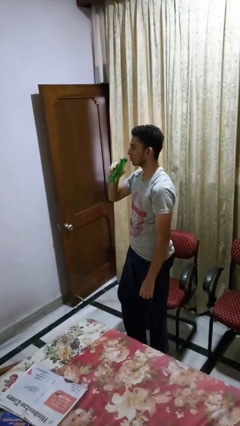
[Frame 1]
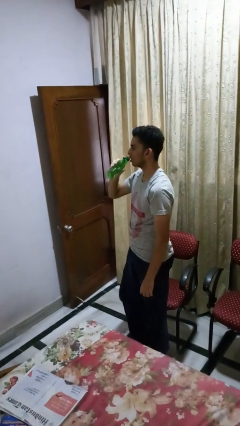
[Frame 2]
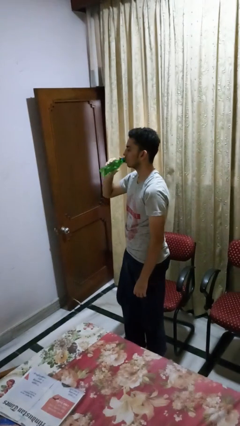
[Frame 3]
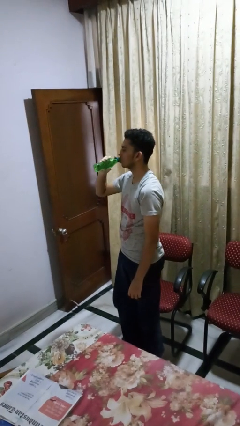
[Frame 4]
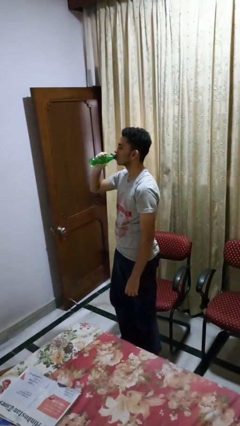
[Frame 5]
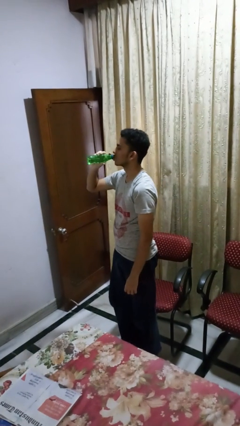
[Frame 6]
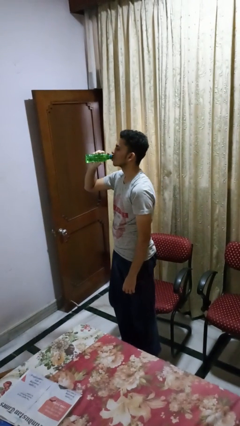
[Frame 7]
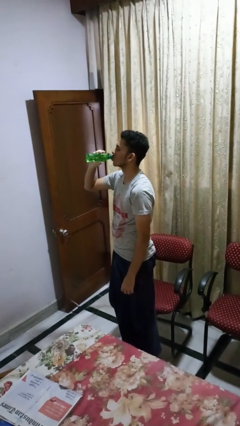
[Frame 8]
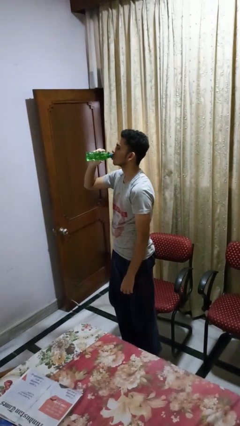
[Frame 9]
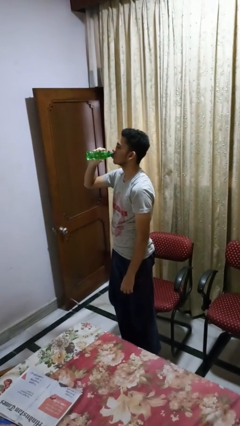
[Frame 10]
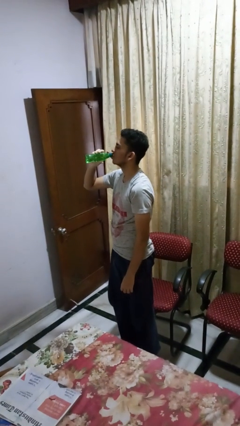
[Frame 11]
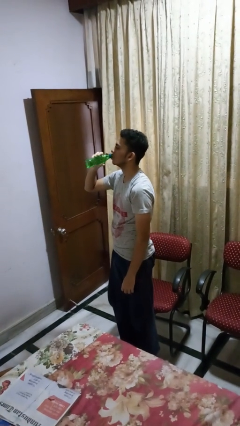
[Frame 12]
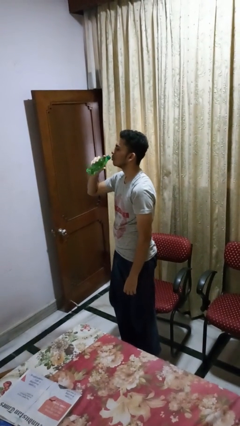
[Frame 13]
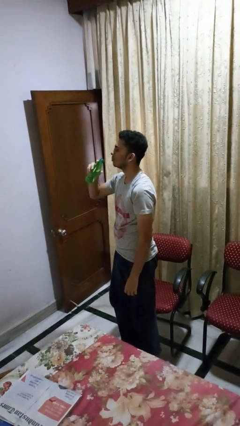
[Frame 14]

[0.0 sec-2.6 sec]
person drinks from bottle

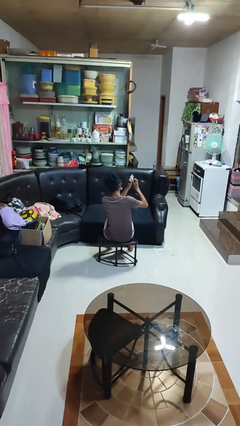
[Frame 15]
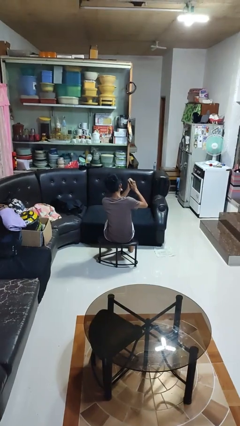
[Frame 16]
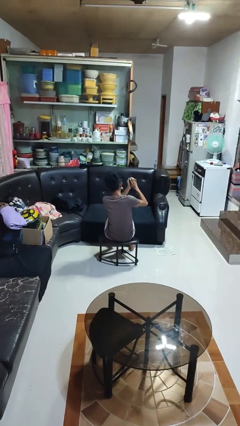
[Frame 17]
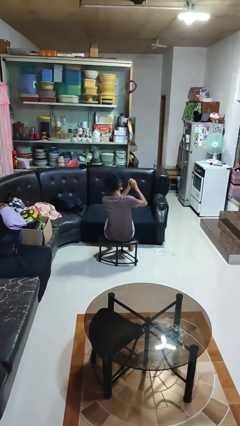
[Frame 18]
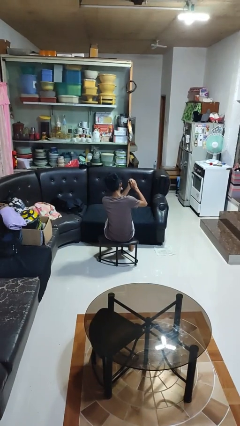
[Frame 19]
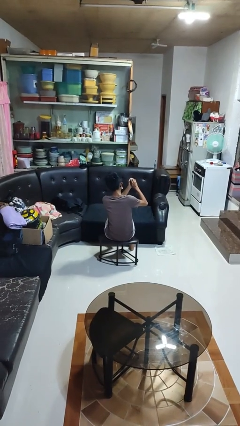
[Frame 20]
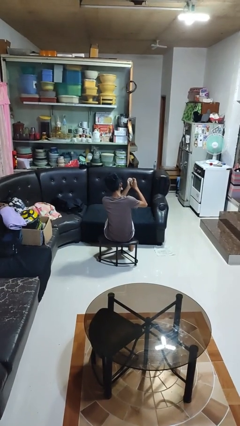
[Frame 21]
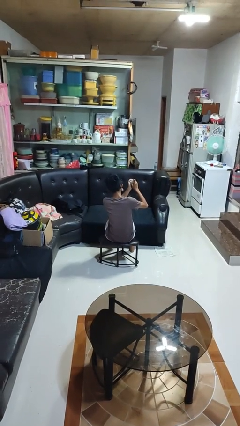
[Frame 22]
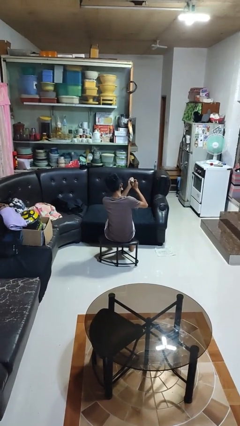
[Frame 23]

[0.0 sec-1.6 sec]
person crumples paper

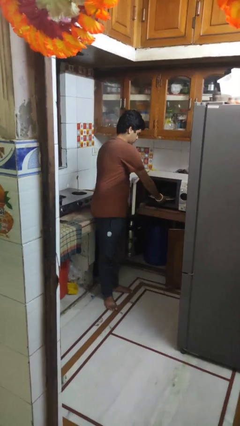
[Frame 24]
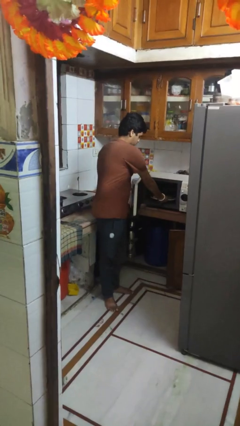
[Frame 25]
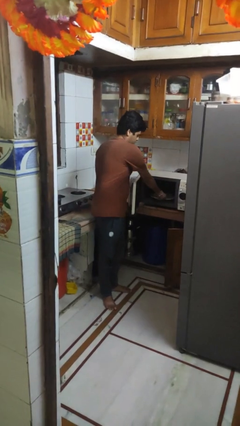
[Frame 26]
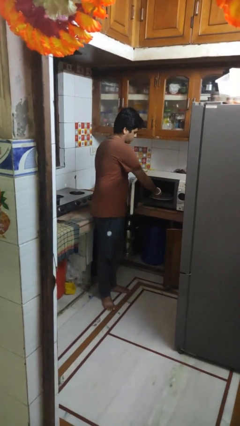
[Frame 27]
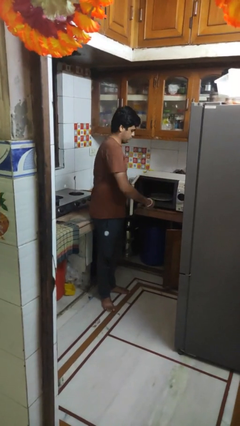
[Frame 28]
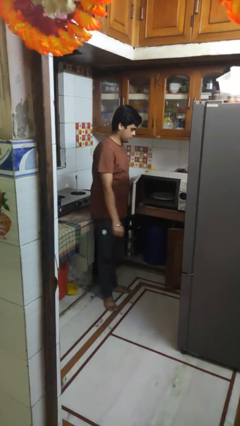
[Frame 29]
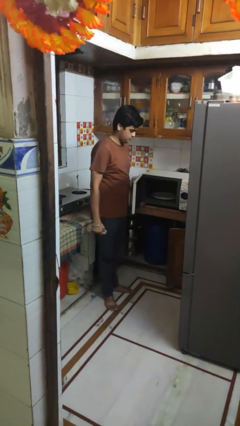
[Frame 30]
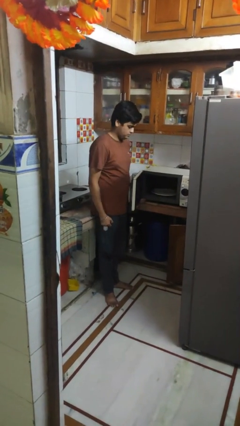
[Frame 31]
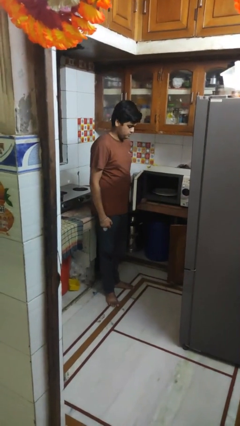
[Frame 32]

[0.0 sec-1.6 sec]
person puts object into microwave

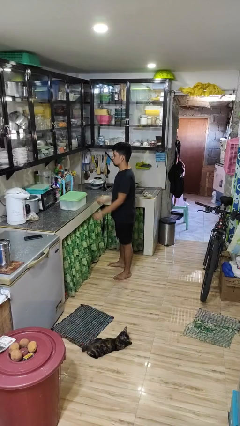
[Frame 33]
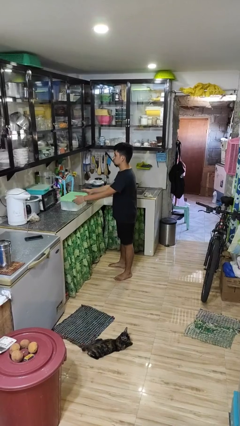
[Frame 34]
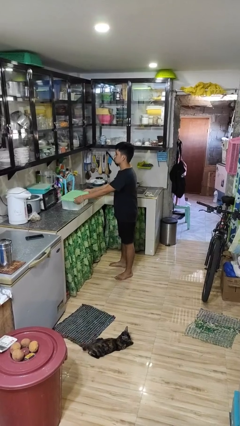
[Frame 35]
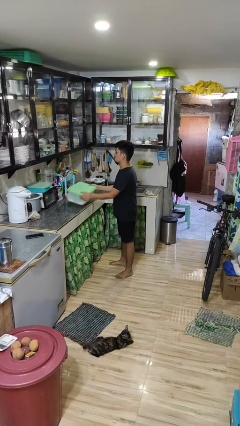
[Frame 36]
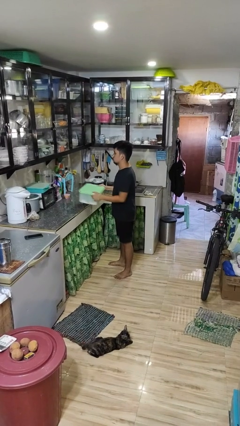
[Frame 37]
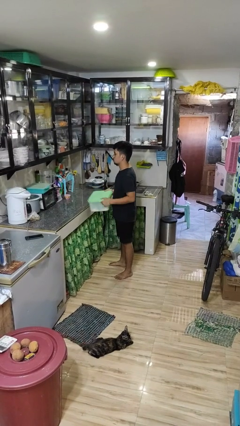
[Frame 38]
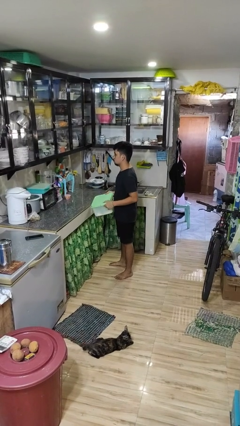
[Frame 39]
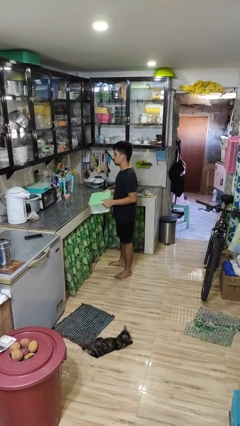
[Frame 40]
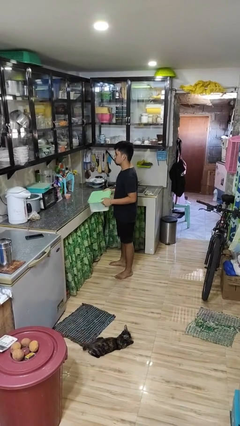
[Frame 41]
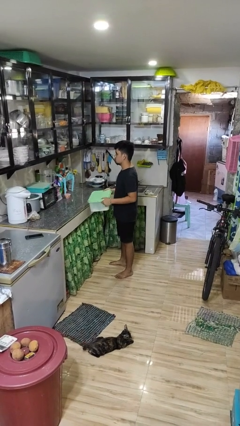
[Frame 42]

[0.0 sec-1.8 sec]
person picks up object from countertop

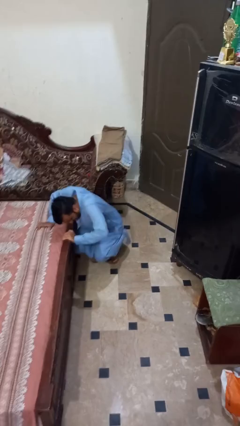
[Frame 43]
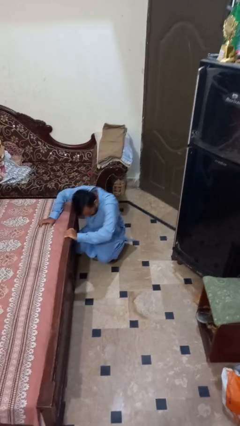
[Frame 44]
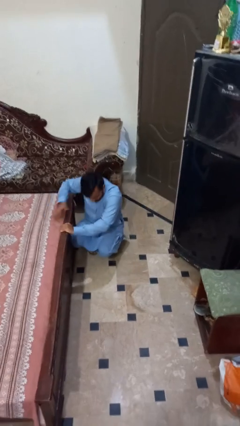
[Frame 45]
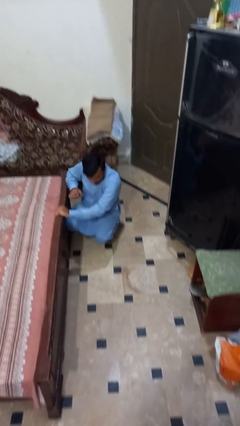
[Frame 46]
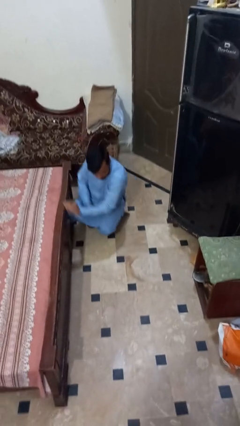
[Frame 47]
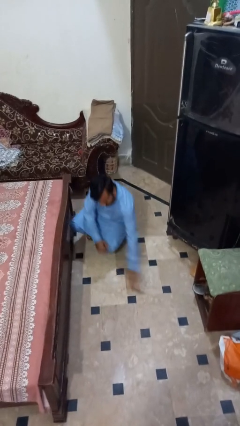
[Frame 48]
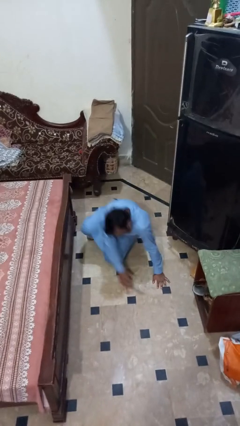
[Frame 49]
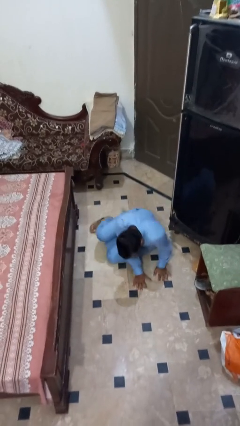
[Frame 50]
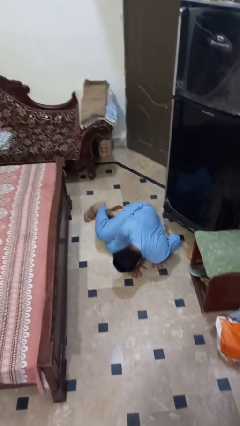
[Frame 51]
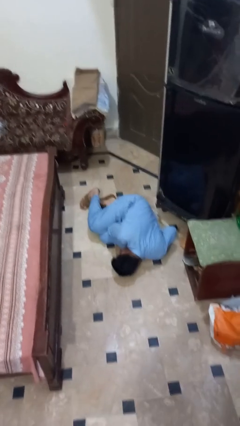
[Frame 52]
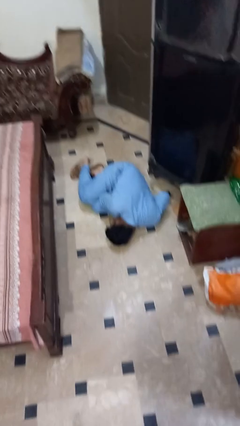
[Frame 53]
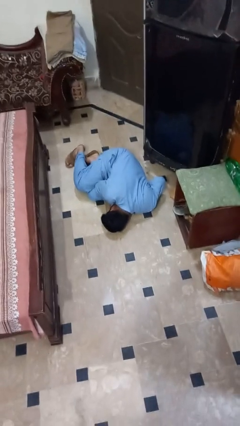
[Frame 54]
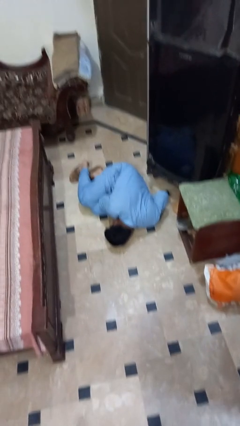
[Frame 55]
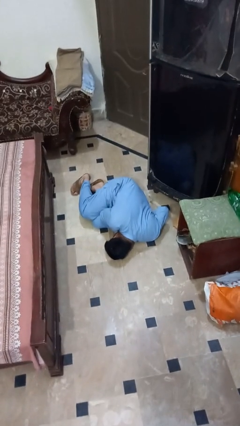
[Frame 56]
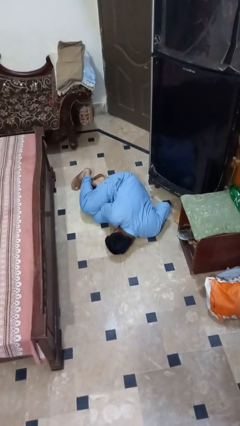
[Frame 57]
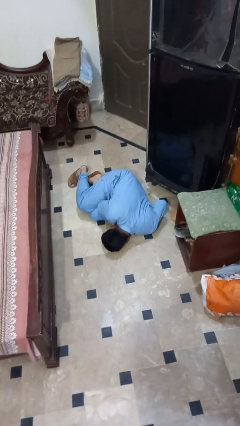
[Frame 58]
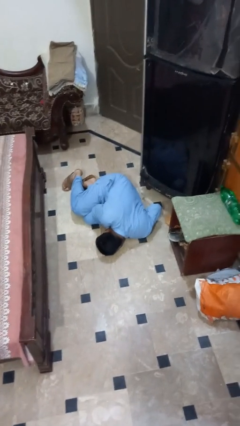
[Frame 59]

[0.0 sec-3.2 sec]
person lies down on floor

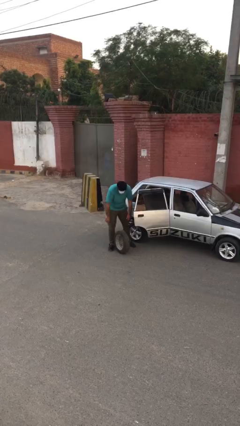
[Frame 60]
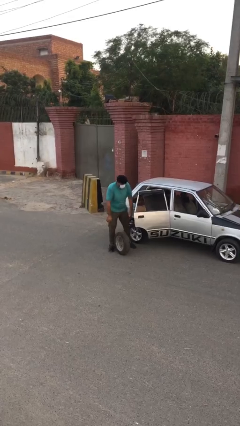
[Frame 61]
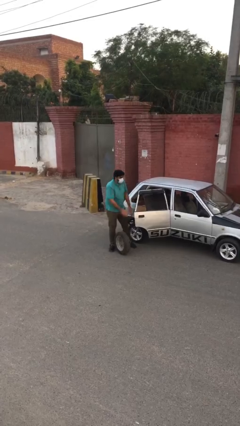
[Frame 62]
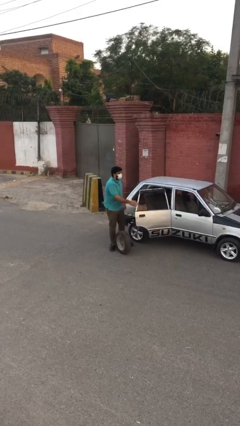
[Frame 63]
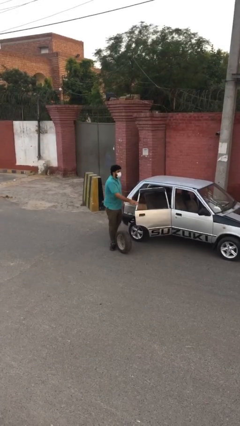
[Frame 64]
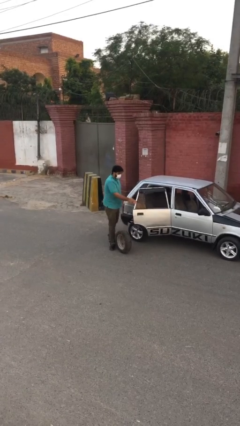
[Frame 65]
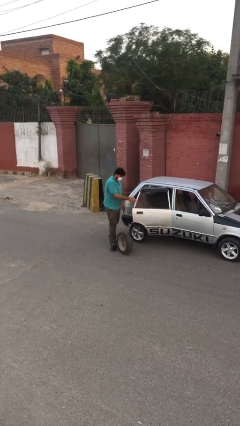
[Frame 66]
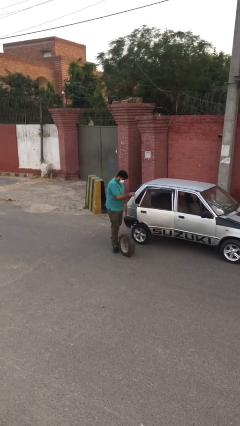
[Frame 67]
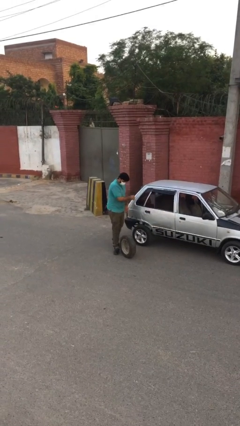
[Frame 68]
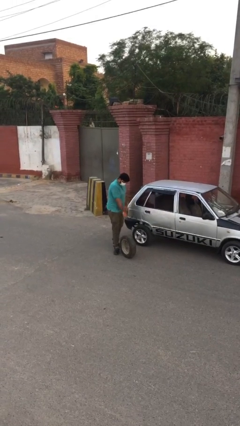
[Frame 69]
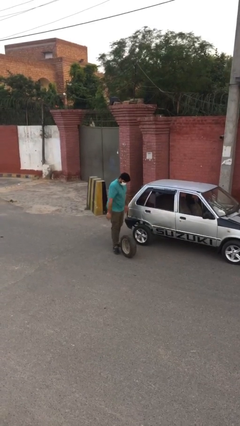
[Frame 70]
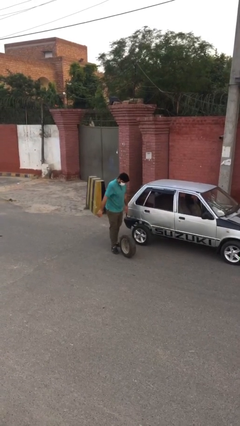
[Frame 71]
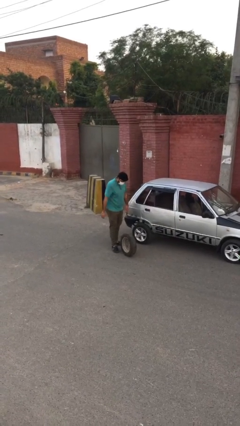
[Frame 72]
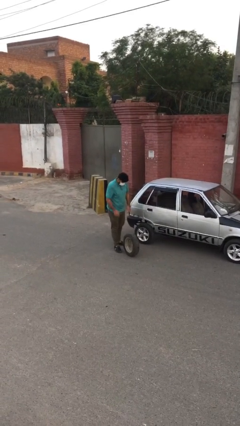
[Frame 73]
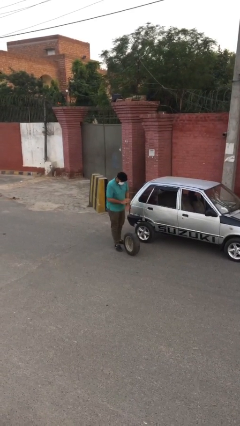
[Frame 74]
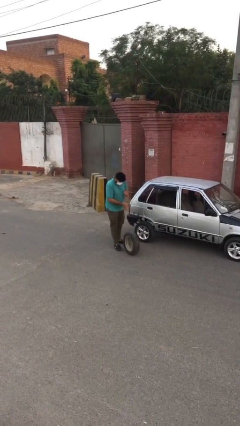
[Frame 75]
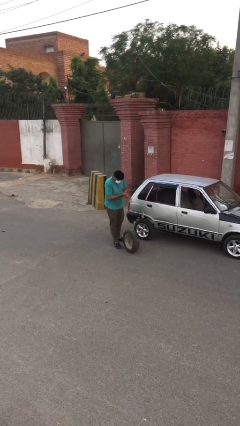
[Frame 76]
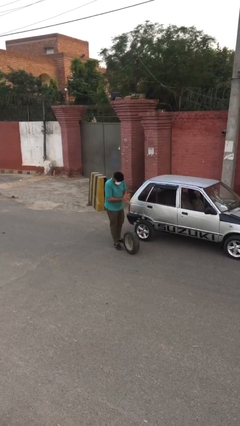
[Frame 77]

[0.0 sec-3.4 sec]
person closes car door

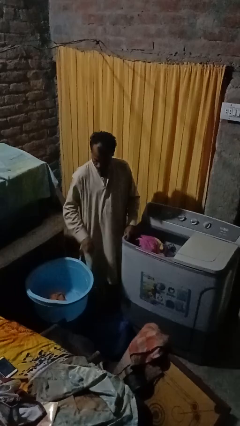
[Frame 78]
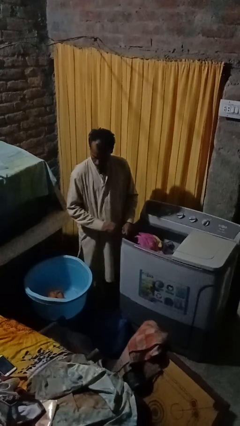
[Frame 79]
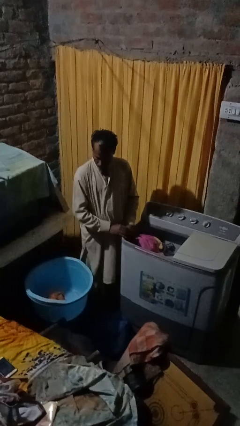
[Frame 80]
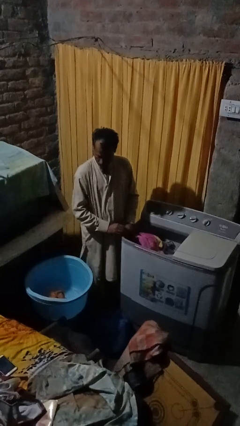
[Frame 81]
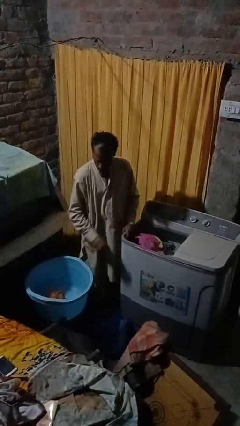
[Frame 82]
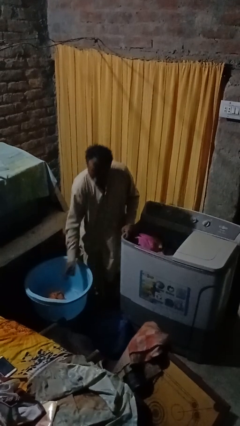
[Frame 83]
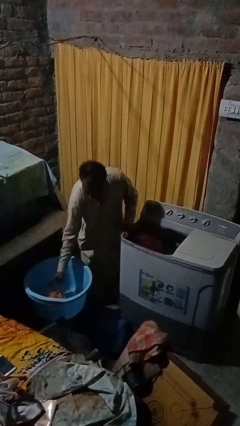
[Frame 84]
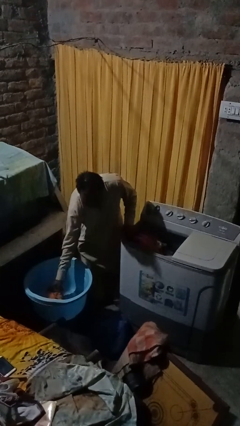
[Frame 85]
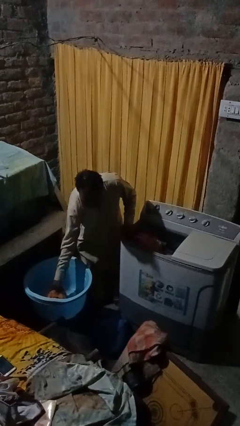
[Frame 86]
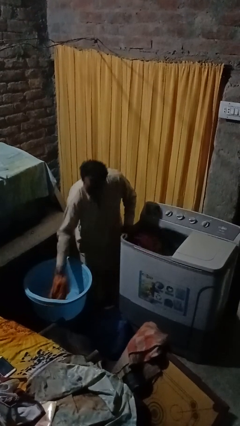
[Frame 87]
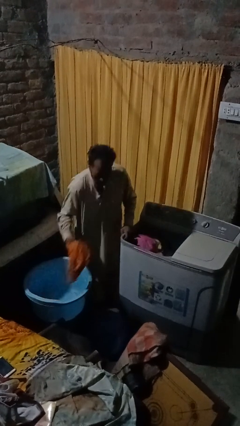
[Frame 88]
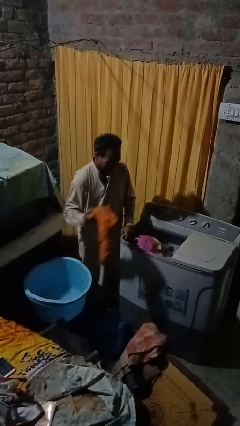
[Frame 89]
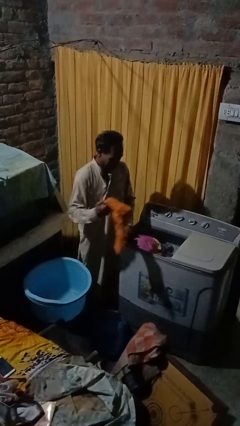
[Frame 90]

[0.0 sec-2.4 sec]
person loads clotheswasher

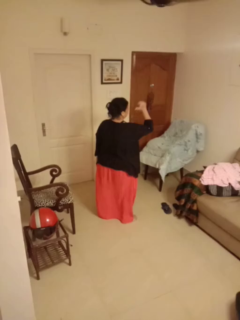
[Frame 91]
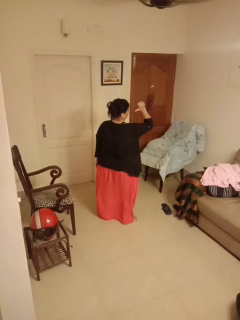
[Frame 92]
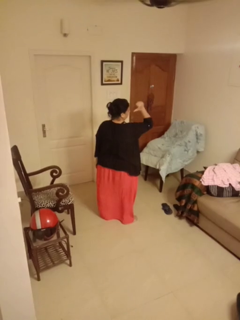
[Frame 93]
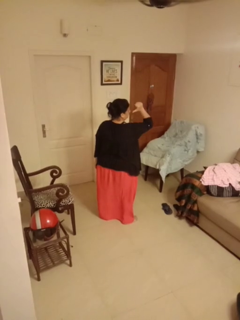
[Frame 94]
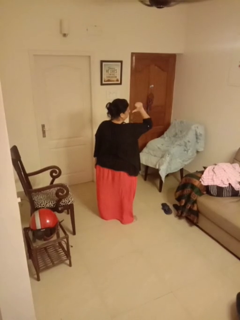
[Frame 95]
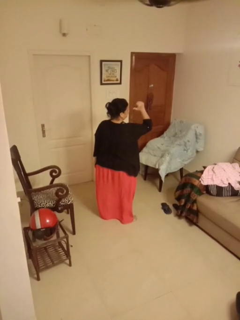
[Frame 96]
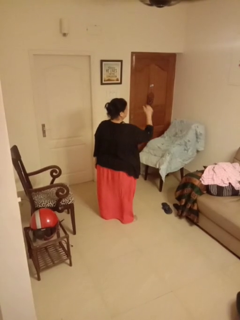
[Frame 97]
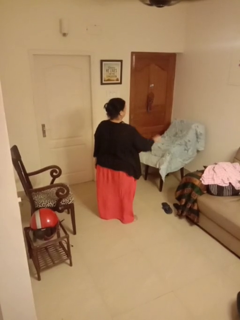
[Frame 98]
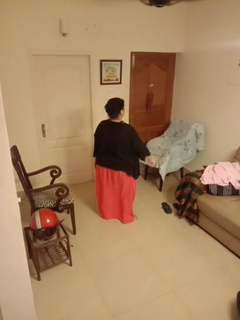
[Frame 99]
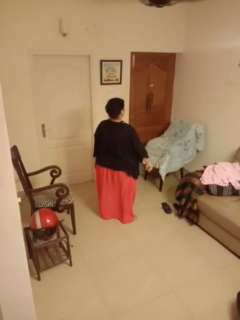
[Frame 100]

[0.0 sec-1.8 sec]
person gestures behind me
